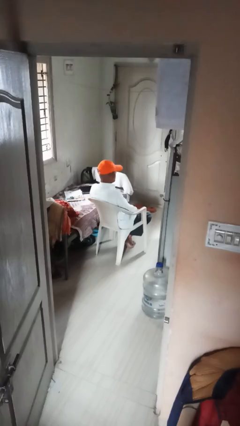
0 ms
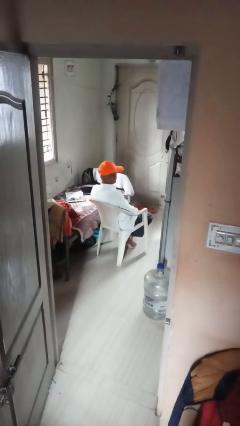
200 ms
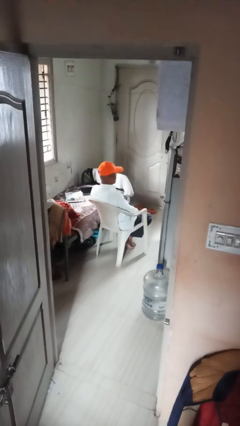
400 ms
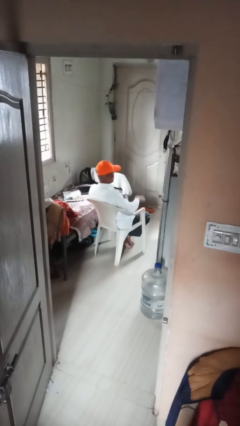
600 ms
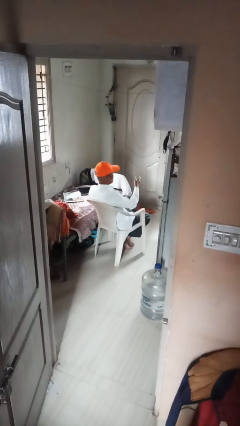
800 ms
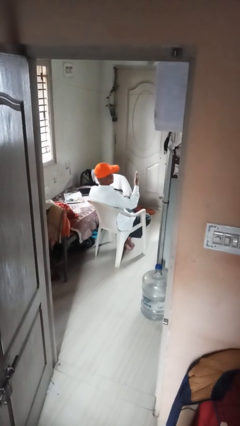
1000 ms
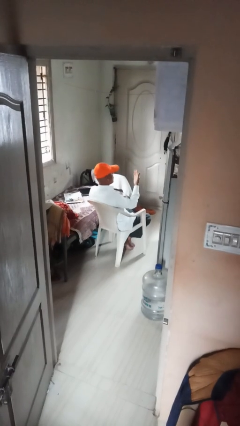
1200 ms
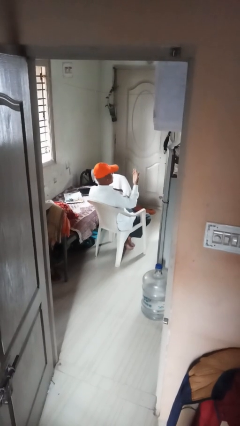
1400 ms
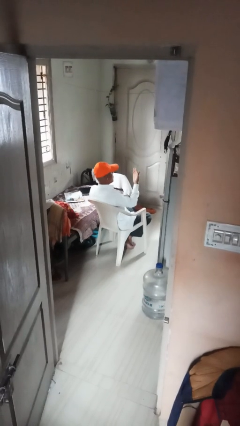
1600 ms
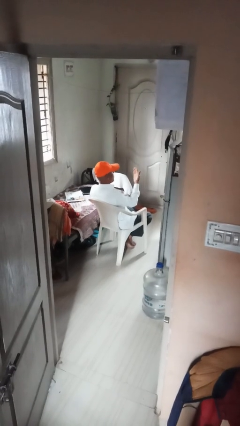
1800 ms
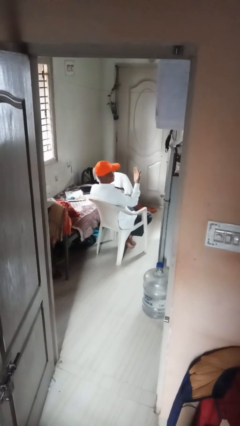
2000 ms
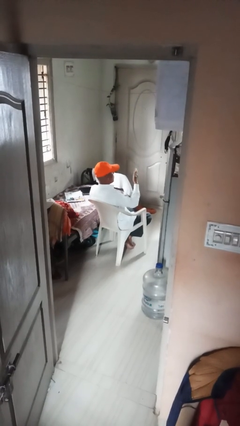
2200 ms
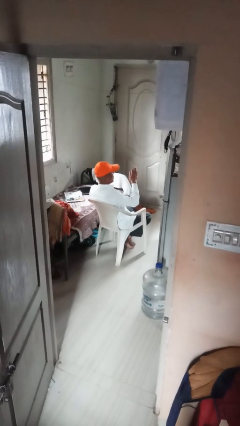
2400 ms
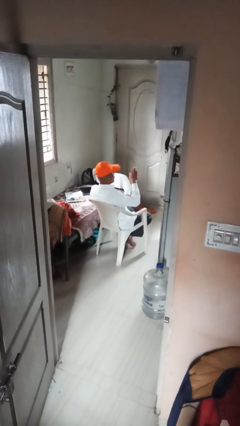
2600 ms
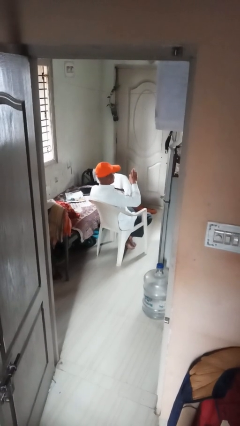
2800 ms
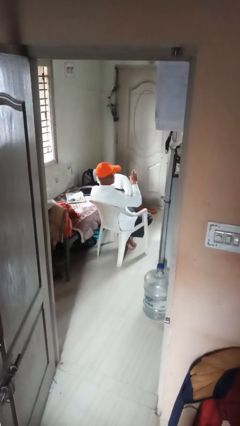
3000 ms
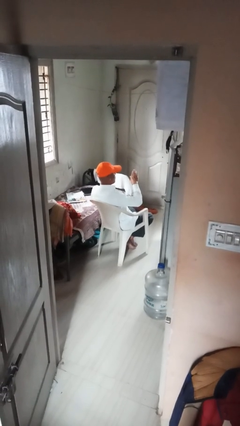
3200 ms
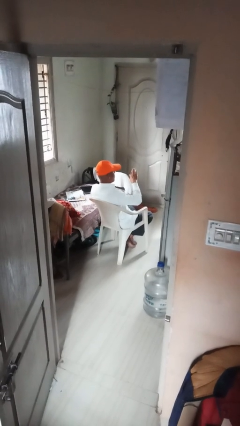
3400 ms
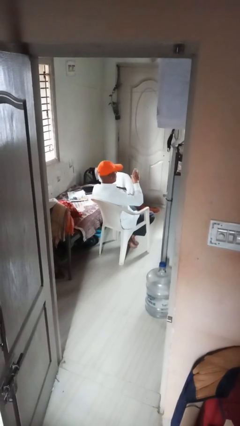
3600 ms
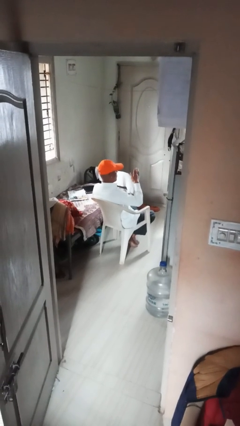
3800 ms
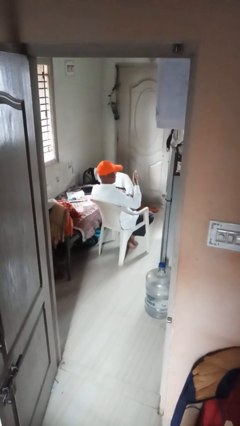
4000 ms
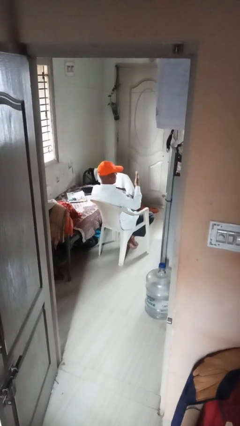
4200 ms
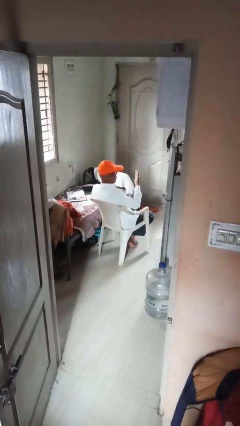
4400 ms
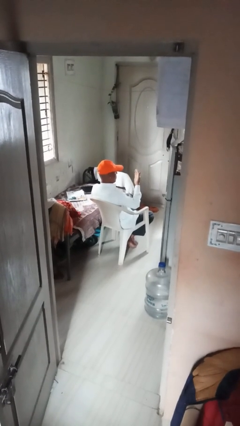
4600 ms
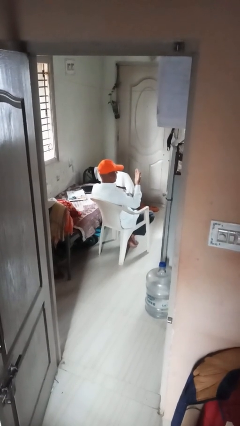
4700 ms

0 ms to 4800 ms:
person looks at hands in lap

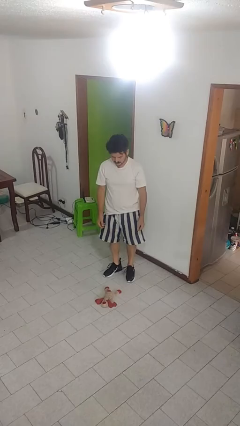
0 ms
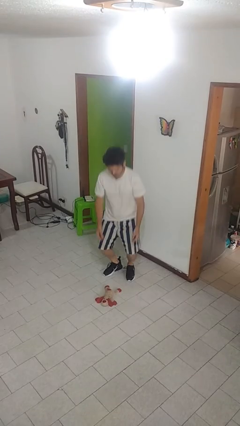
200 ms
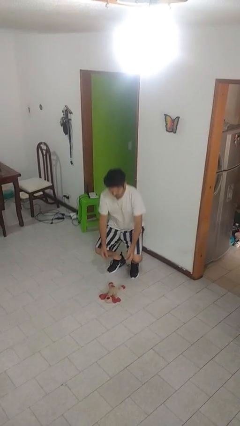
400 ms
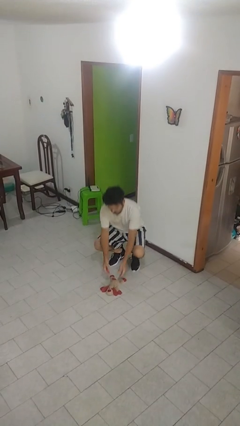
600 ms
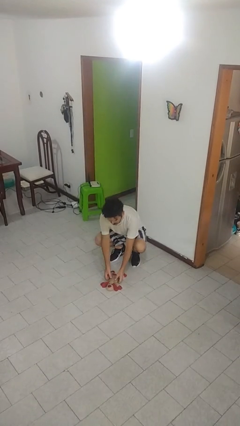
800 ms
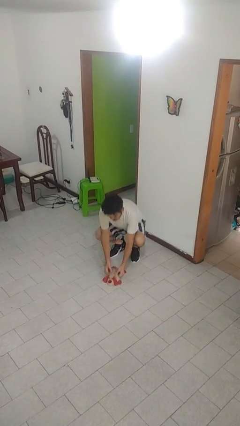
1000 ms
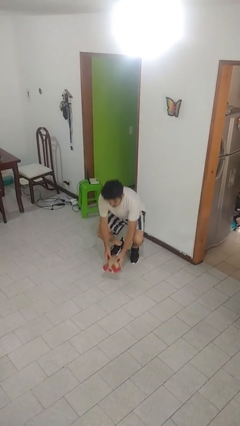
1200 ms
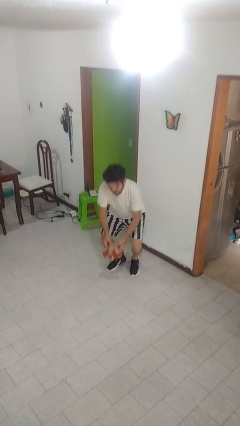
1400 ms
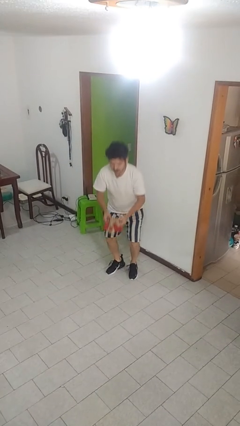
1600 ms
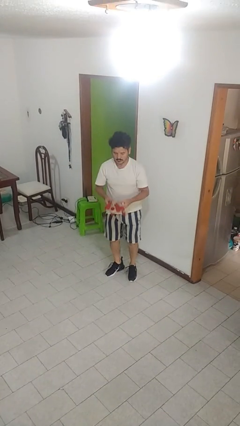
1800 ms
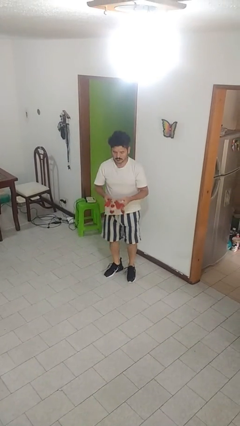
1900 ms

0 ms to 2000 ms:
person picks up object from floor

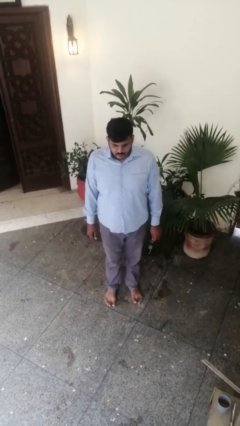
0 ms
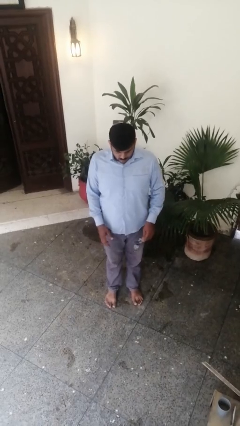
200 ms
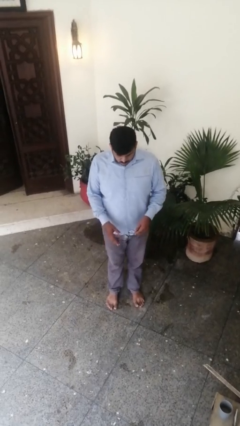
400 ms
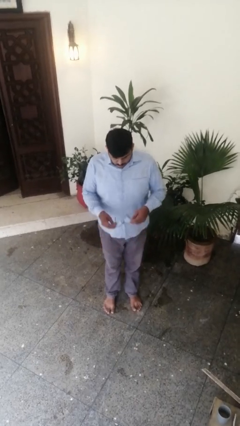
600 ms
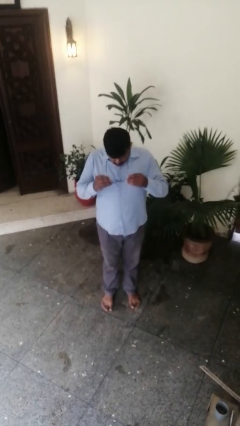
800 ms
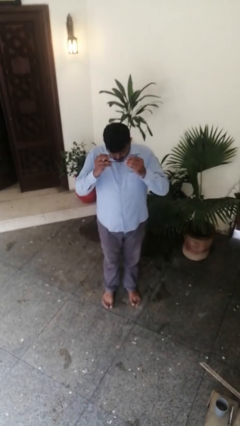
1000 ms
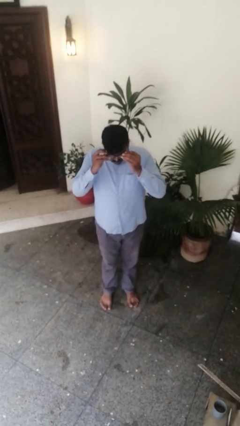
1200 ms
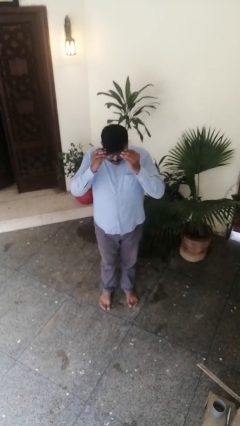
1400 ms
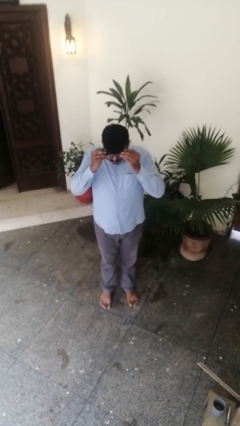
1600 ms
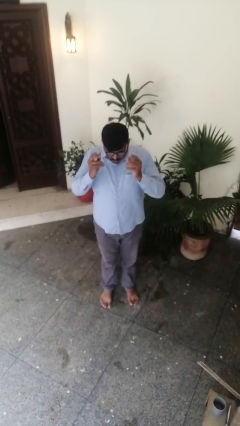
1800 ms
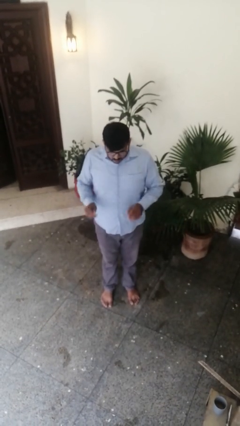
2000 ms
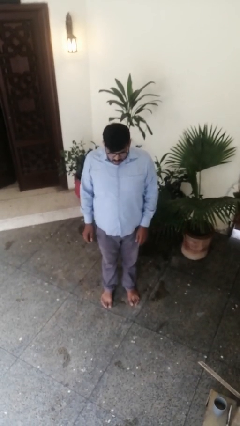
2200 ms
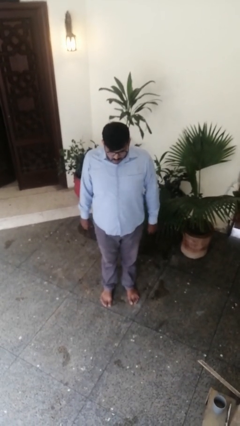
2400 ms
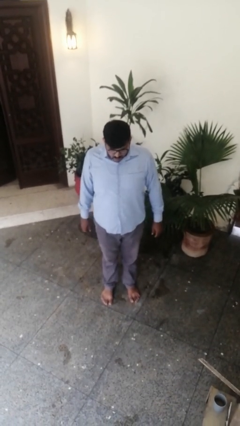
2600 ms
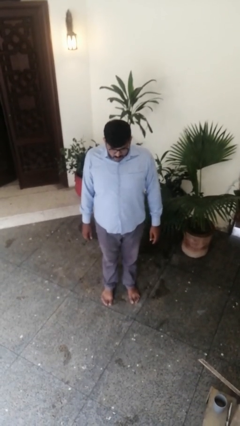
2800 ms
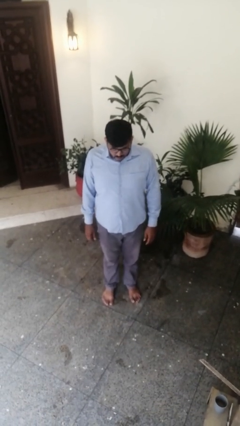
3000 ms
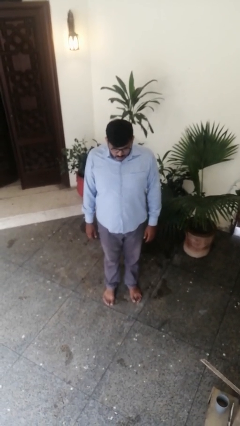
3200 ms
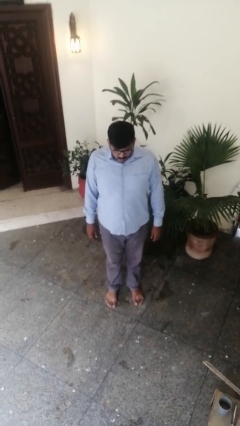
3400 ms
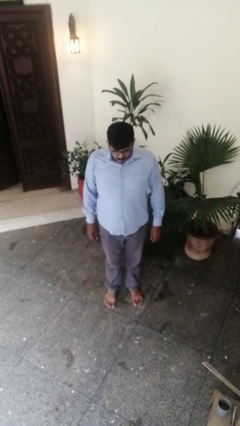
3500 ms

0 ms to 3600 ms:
person puts on glasses

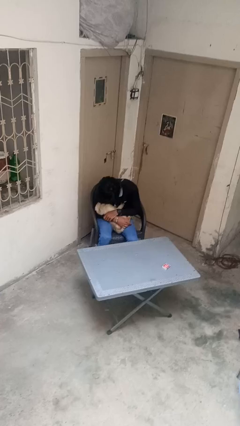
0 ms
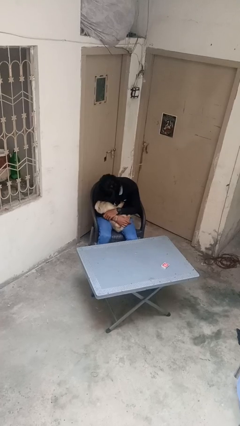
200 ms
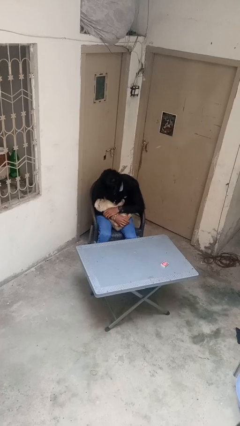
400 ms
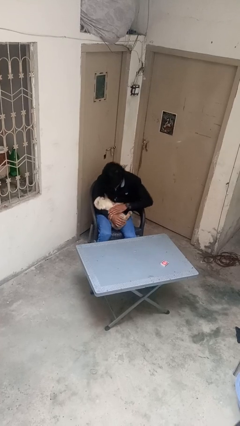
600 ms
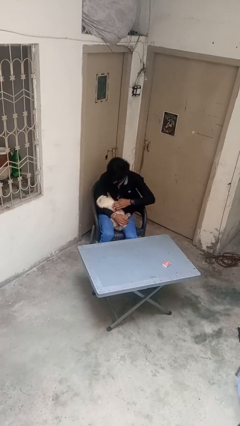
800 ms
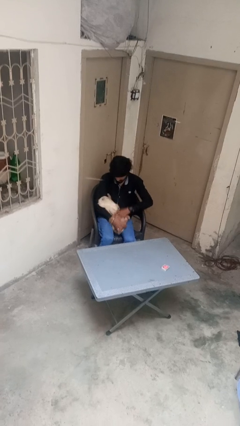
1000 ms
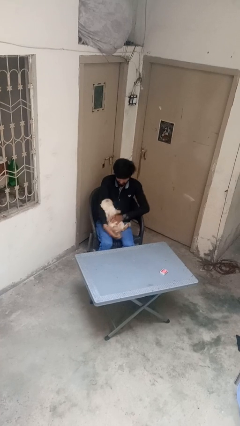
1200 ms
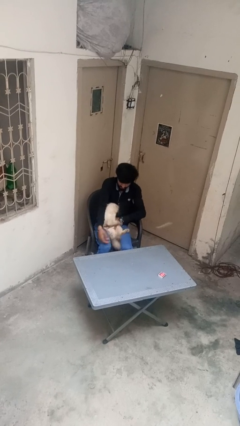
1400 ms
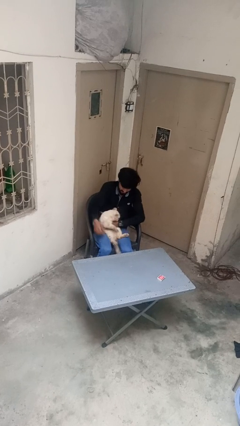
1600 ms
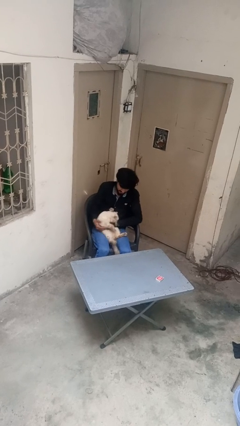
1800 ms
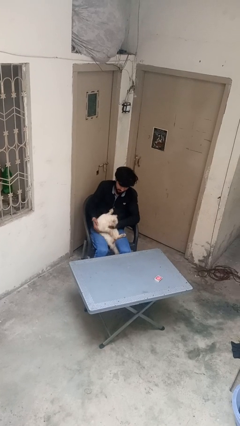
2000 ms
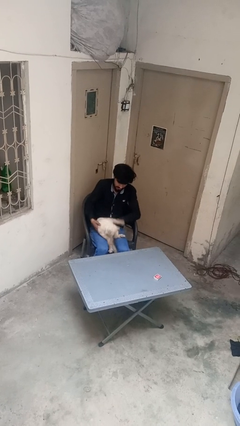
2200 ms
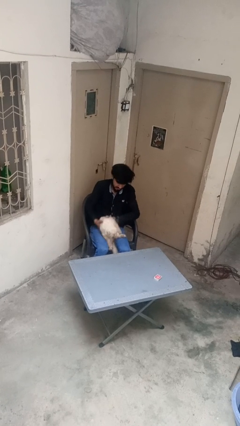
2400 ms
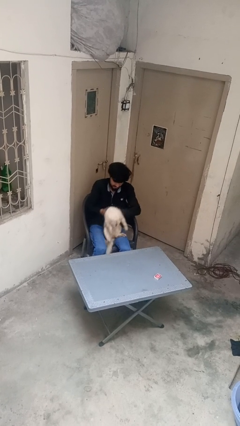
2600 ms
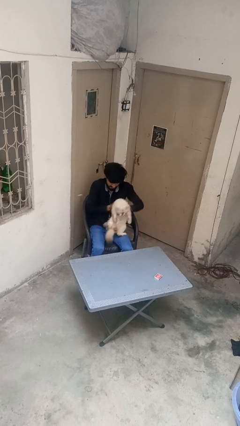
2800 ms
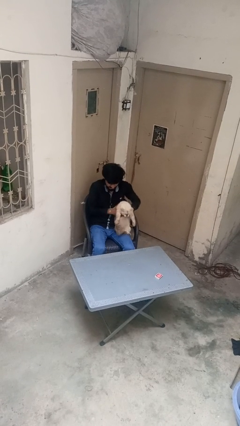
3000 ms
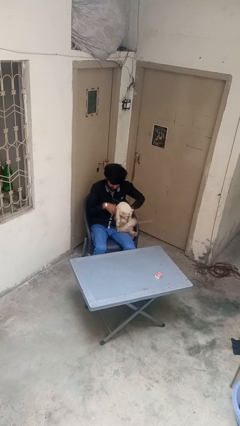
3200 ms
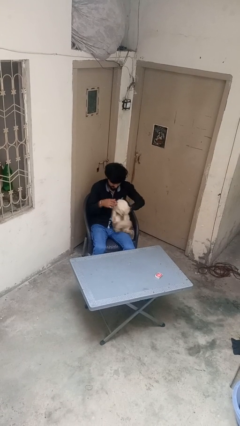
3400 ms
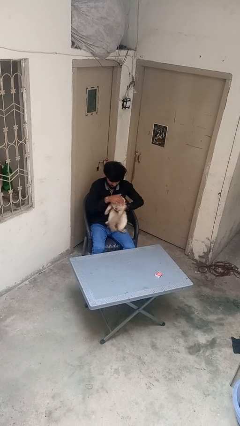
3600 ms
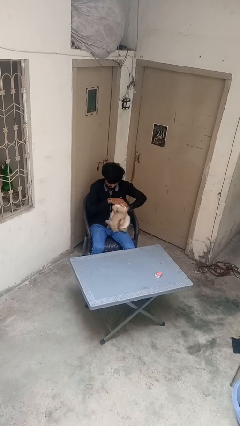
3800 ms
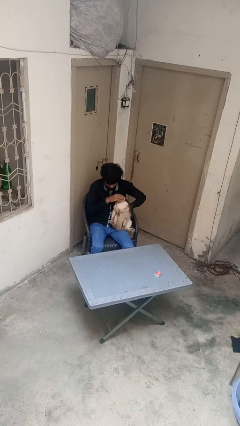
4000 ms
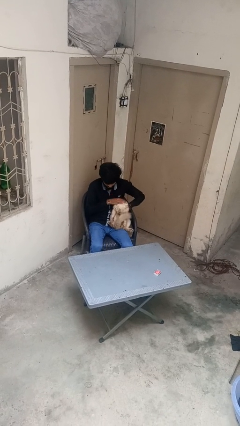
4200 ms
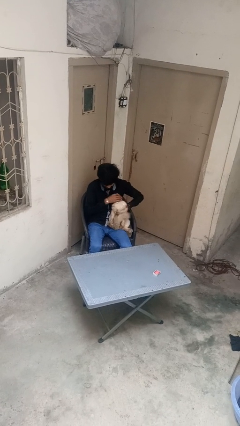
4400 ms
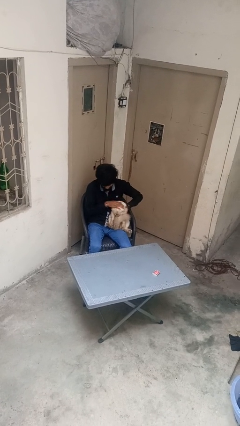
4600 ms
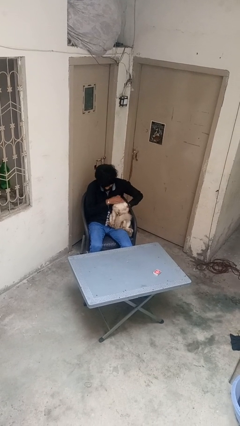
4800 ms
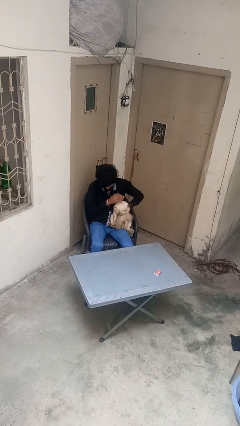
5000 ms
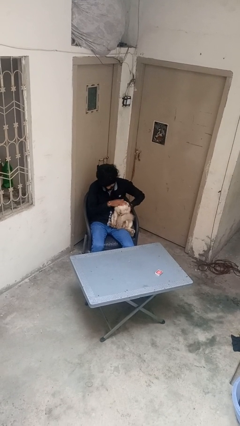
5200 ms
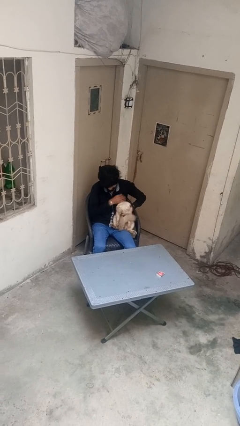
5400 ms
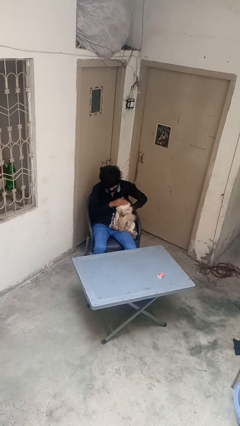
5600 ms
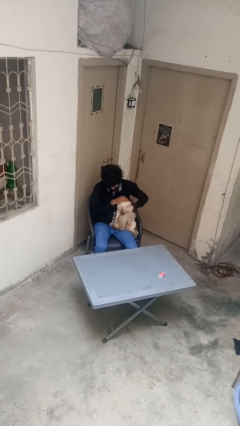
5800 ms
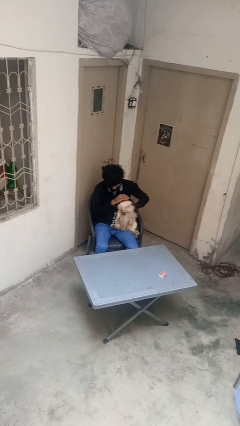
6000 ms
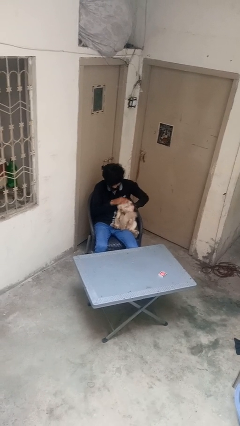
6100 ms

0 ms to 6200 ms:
person pets cat

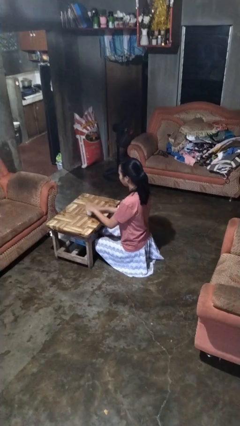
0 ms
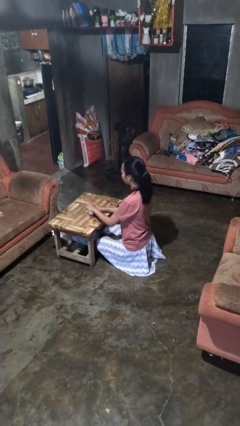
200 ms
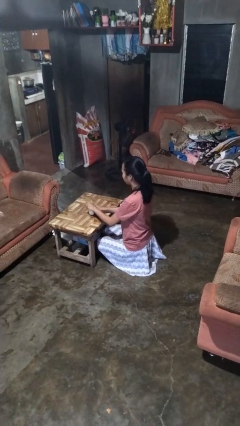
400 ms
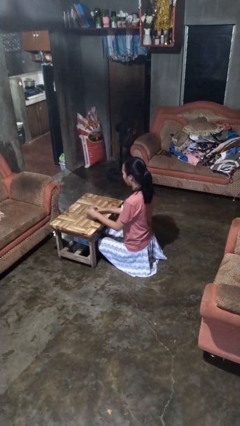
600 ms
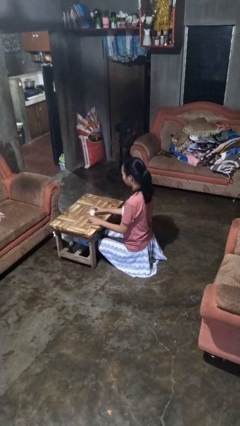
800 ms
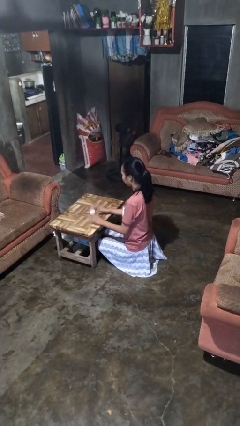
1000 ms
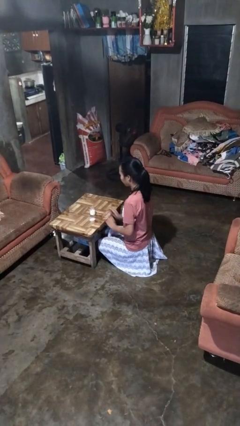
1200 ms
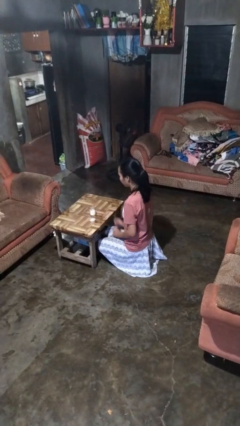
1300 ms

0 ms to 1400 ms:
person opens jar
